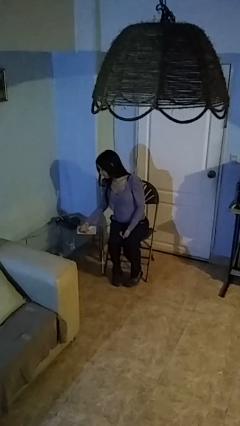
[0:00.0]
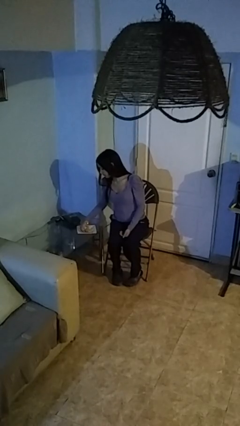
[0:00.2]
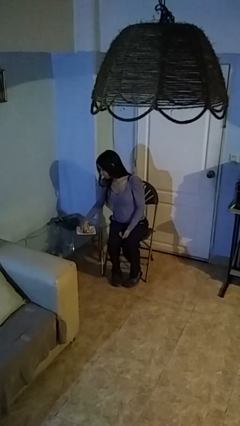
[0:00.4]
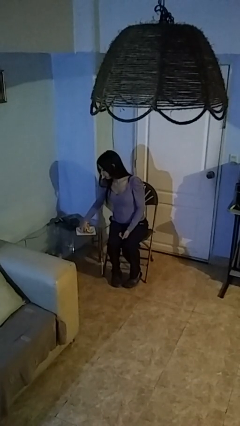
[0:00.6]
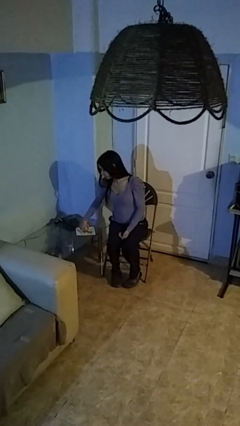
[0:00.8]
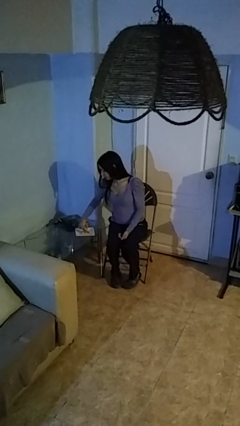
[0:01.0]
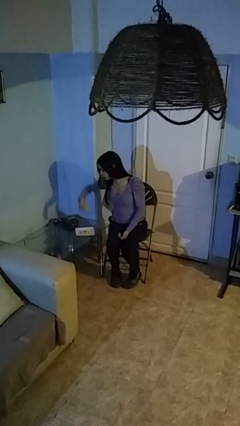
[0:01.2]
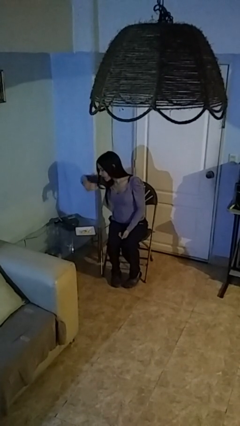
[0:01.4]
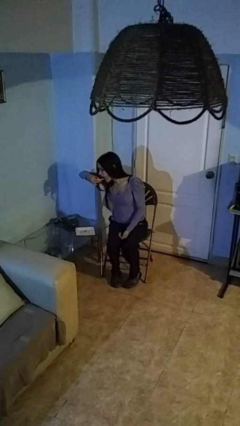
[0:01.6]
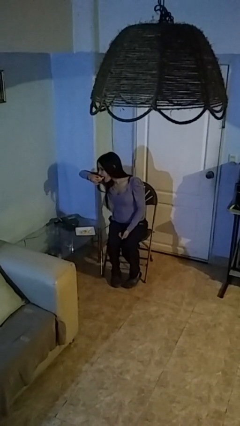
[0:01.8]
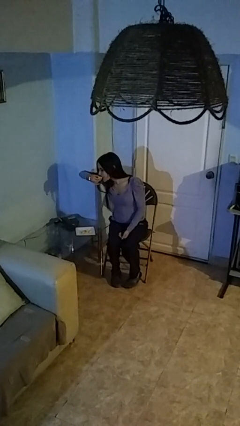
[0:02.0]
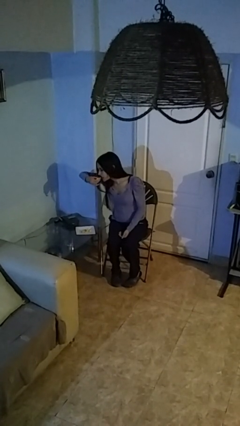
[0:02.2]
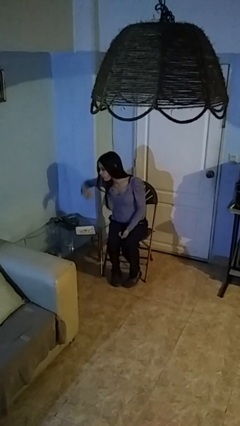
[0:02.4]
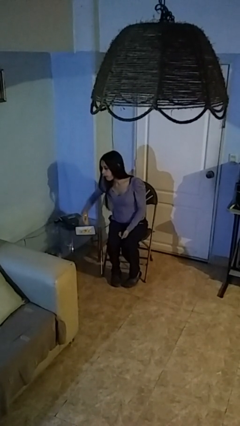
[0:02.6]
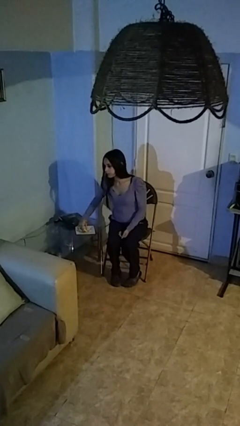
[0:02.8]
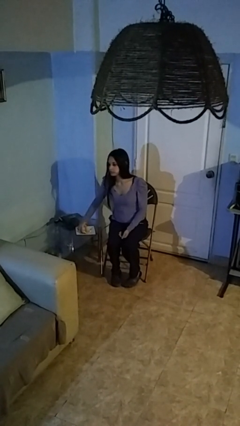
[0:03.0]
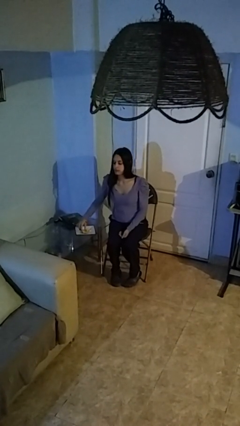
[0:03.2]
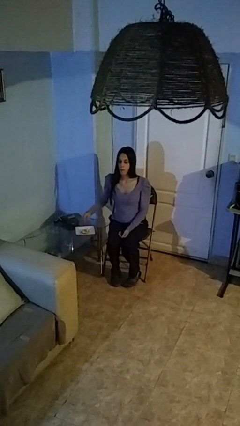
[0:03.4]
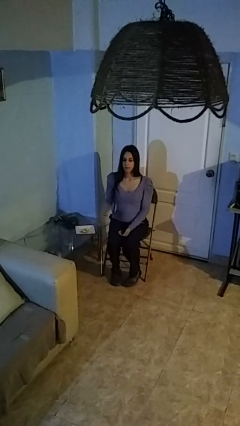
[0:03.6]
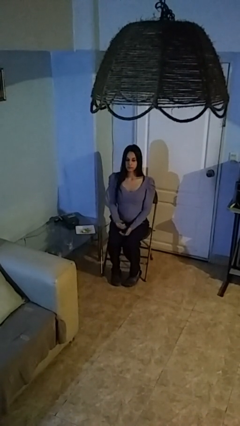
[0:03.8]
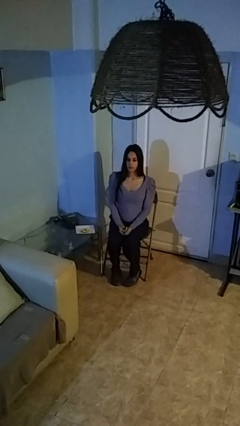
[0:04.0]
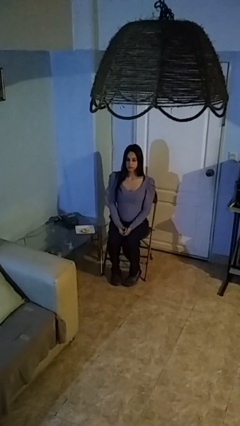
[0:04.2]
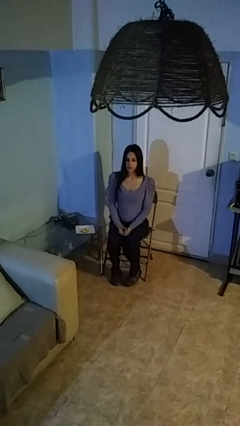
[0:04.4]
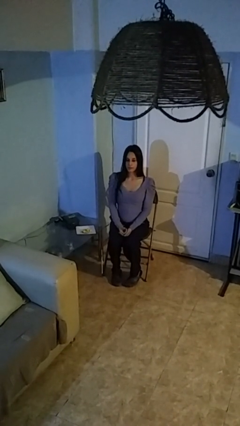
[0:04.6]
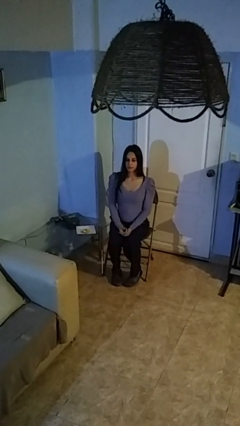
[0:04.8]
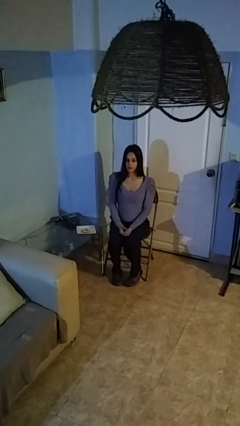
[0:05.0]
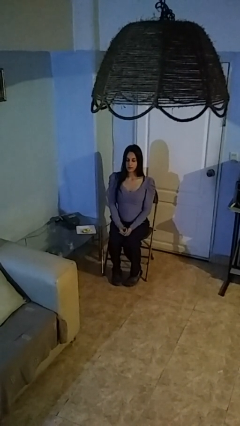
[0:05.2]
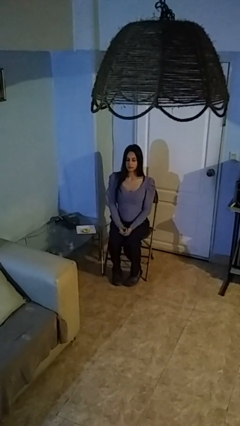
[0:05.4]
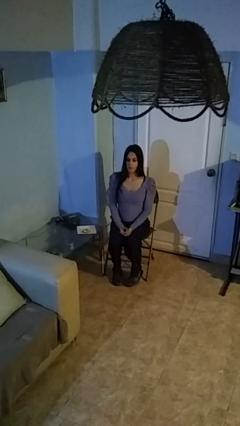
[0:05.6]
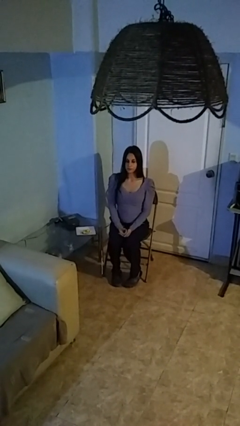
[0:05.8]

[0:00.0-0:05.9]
person eats with hands

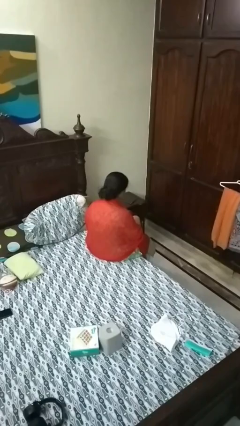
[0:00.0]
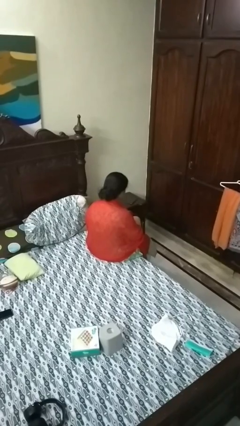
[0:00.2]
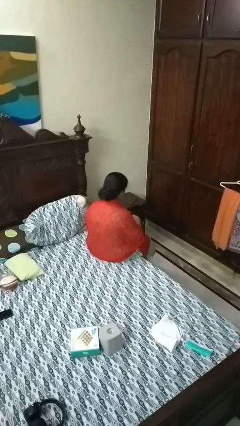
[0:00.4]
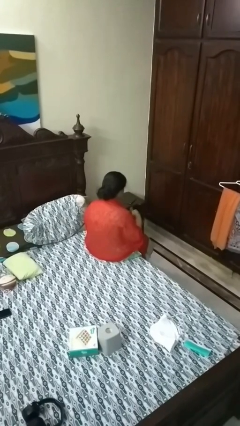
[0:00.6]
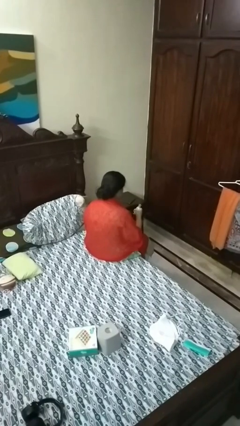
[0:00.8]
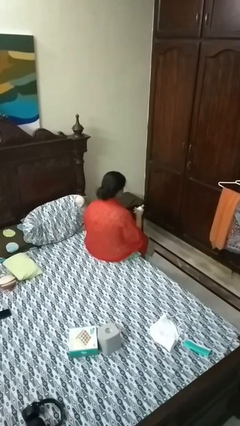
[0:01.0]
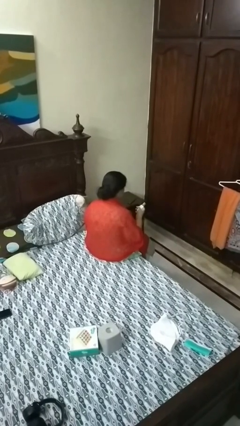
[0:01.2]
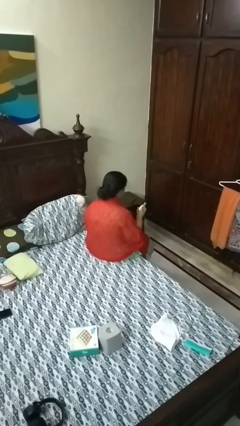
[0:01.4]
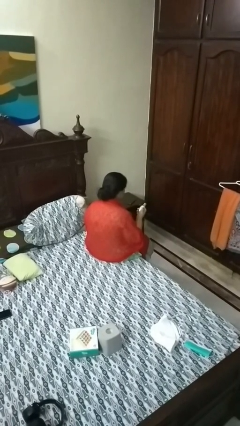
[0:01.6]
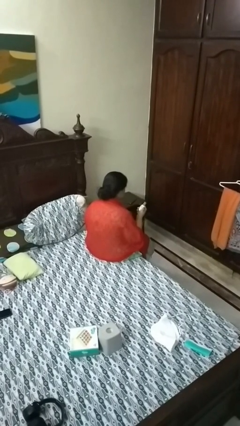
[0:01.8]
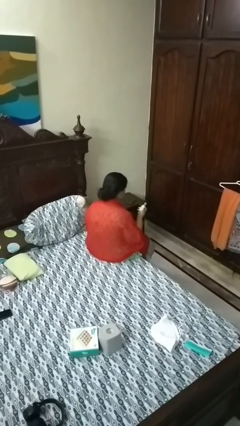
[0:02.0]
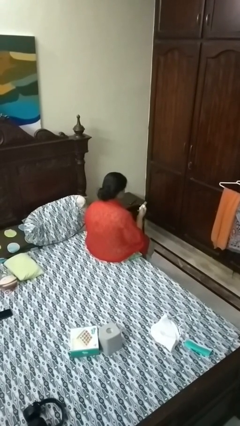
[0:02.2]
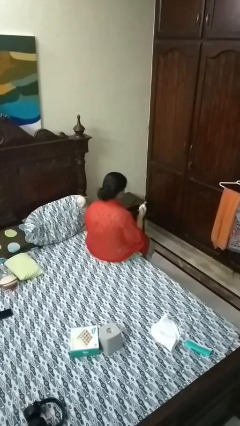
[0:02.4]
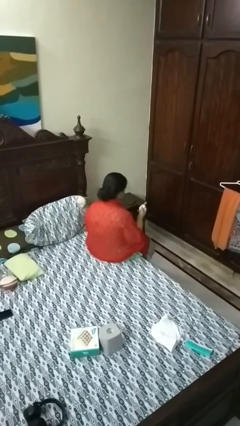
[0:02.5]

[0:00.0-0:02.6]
person takes object from purse

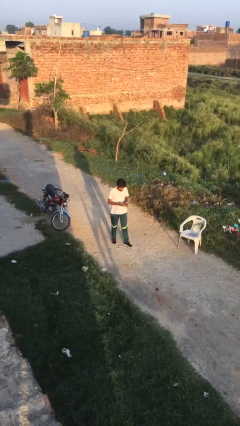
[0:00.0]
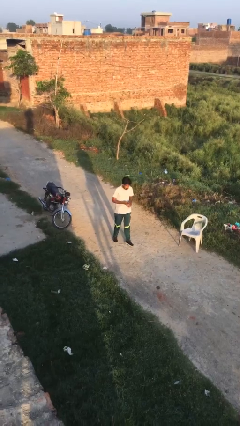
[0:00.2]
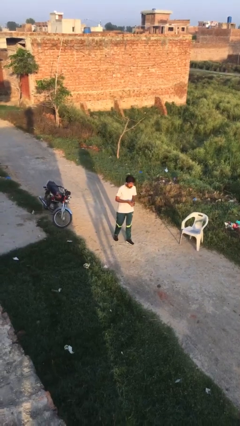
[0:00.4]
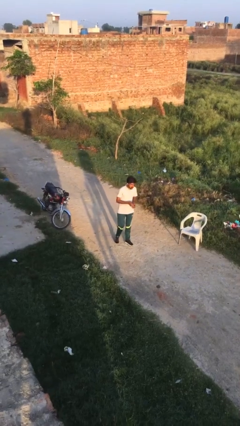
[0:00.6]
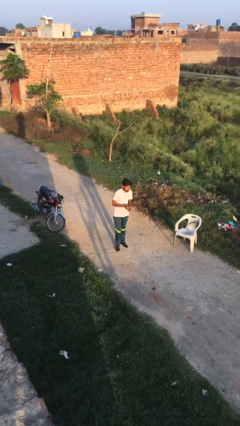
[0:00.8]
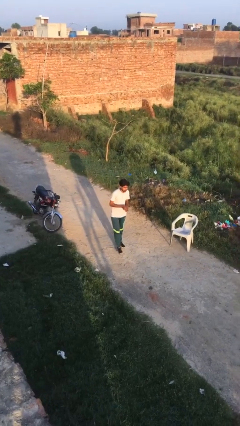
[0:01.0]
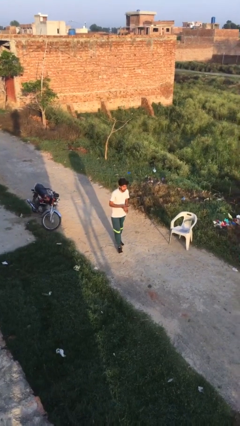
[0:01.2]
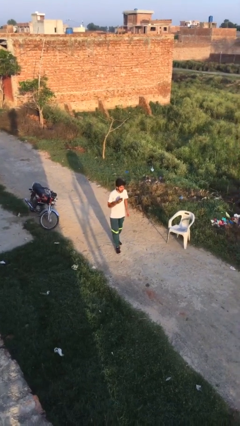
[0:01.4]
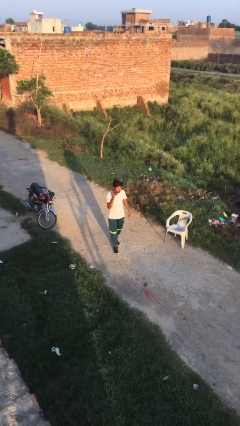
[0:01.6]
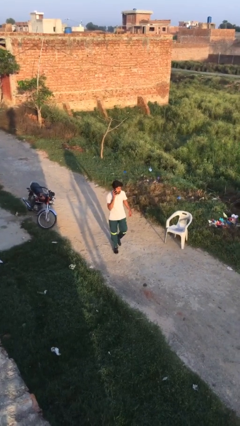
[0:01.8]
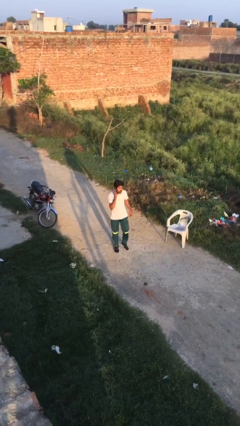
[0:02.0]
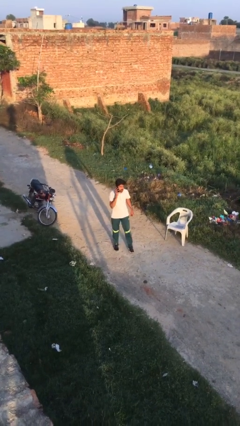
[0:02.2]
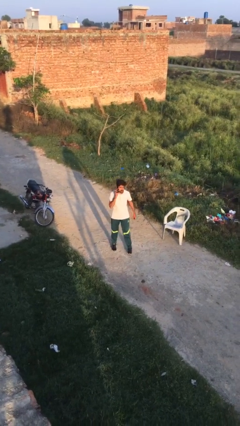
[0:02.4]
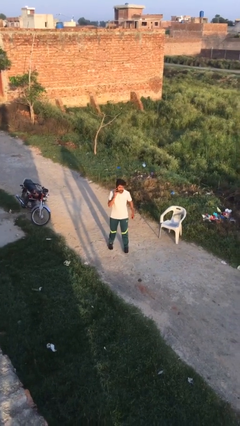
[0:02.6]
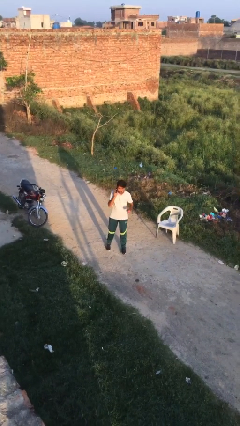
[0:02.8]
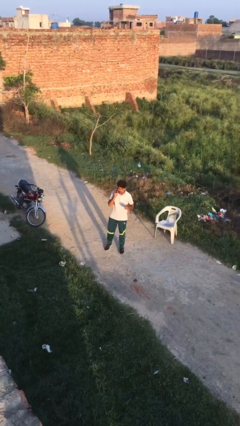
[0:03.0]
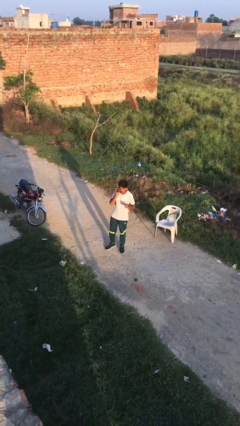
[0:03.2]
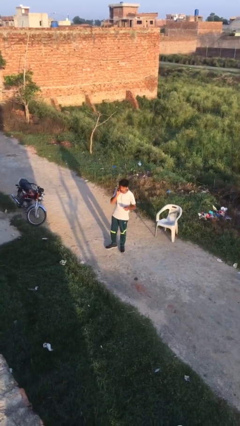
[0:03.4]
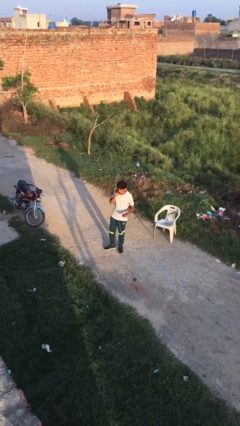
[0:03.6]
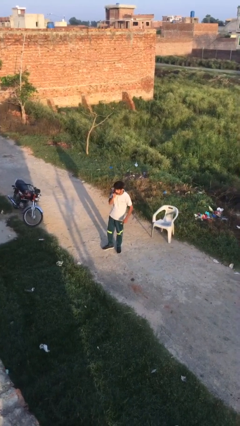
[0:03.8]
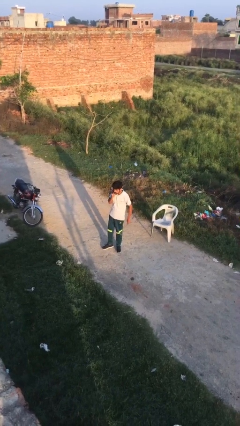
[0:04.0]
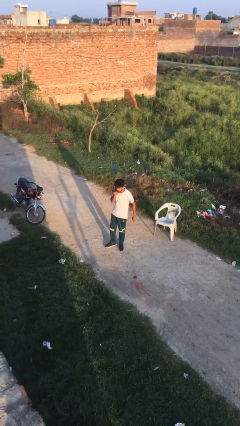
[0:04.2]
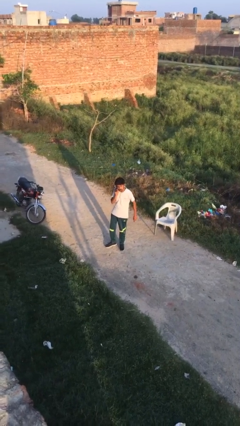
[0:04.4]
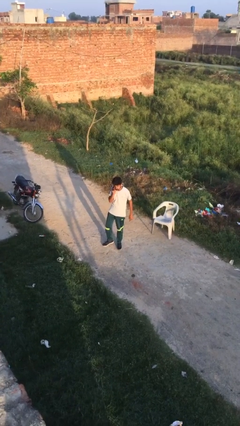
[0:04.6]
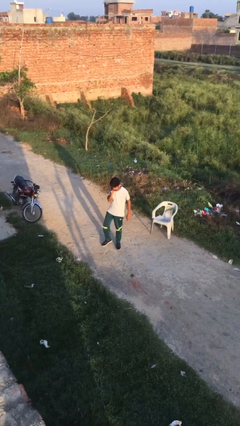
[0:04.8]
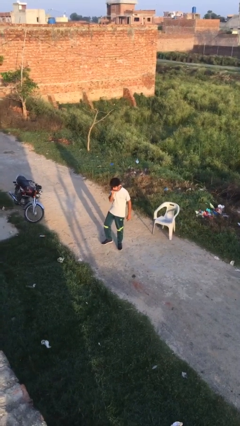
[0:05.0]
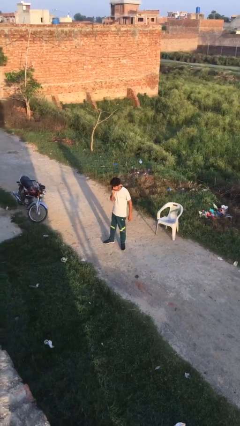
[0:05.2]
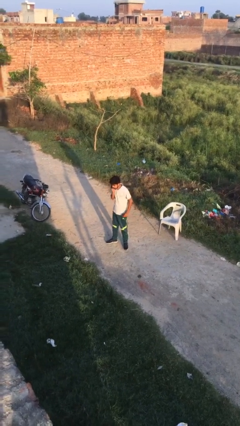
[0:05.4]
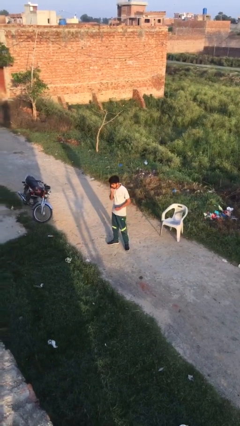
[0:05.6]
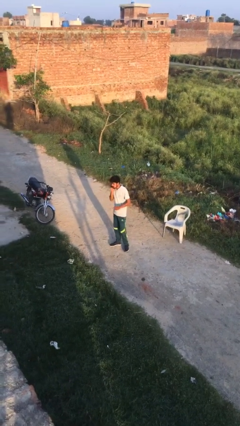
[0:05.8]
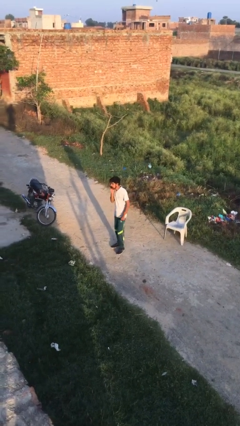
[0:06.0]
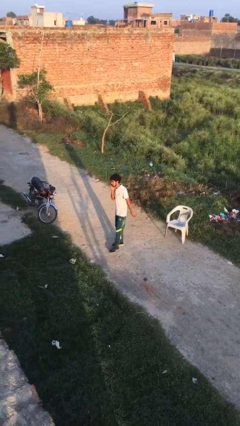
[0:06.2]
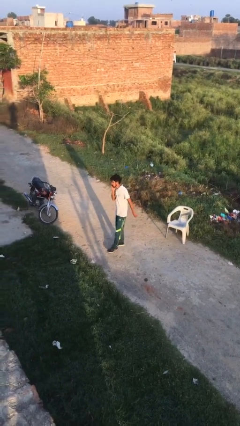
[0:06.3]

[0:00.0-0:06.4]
person talks on phone

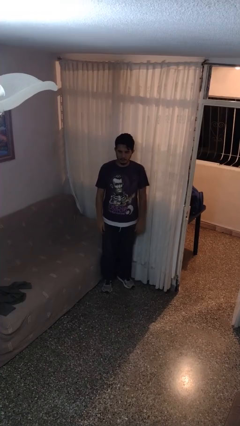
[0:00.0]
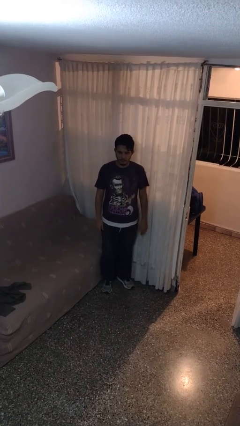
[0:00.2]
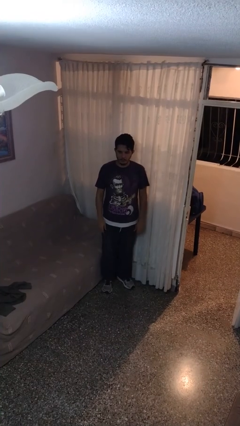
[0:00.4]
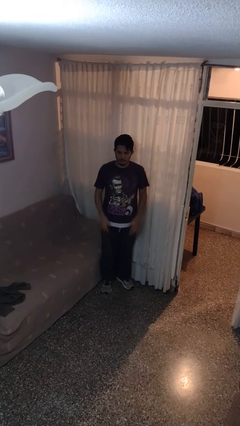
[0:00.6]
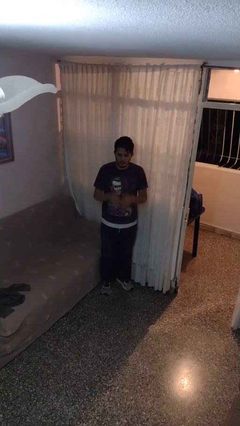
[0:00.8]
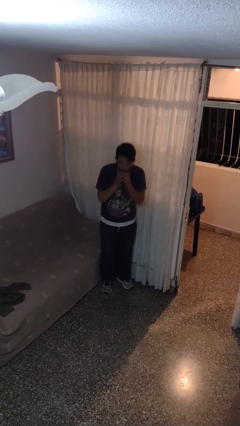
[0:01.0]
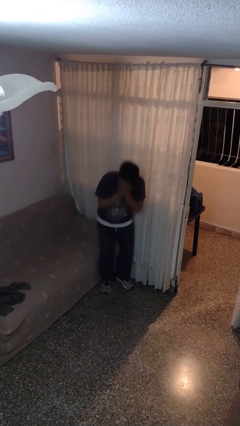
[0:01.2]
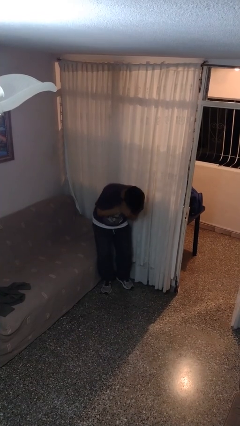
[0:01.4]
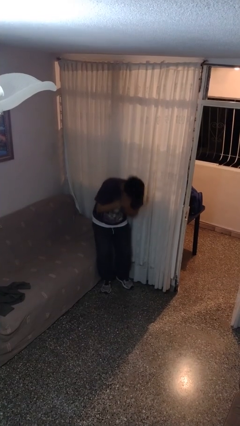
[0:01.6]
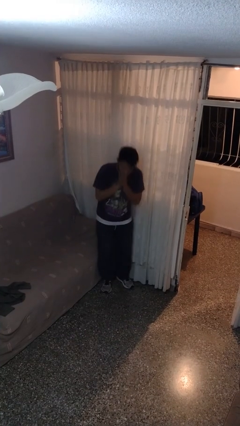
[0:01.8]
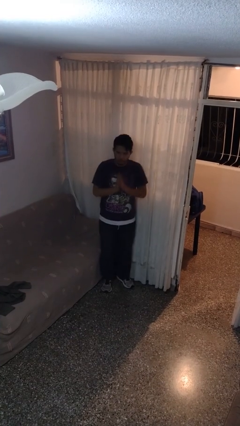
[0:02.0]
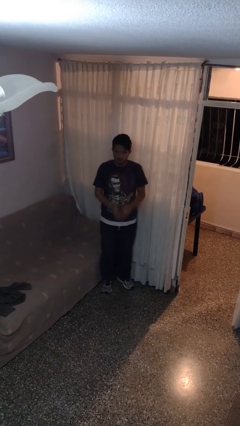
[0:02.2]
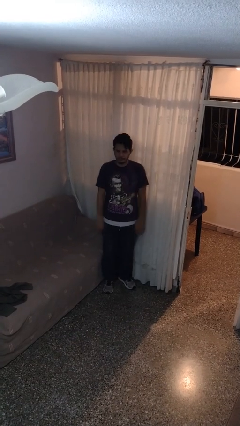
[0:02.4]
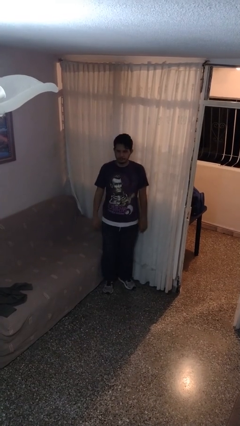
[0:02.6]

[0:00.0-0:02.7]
person sneezes into hand

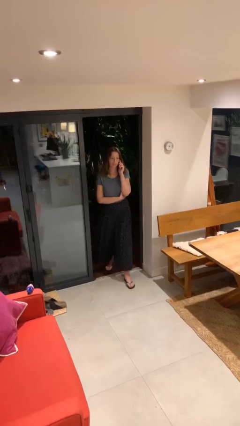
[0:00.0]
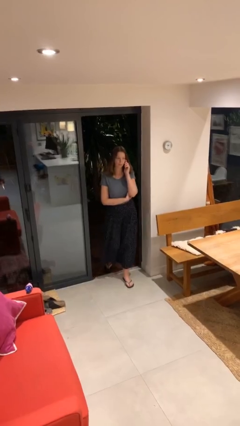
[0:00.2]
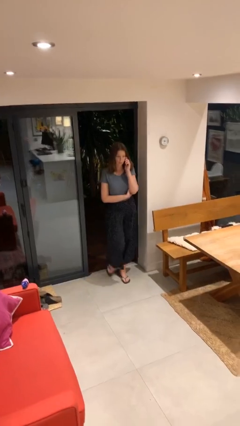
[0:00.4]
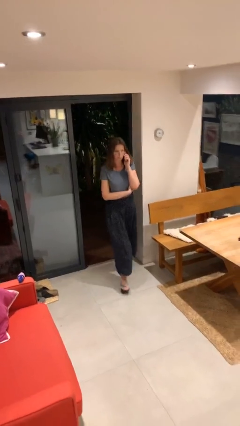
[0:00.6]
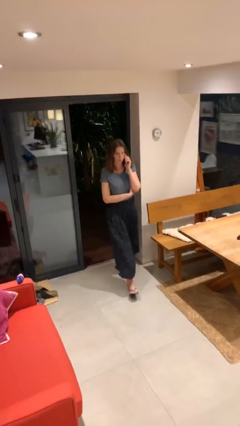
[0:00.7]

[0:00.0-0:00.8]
person enters scene through structure
